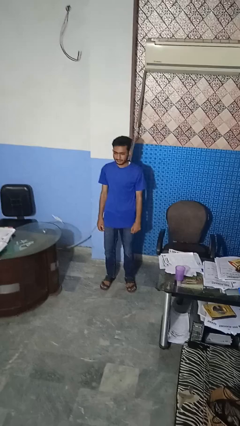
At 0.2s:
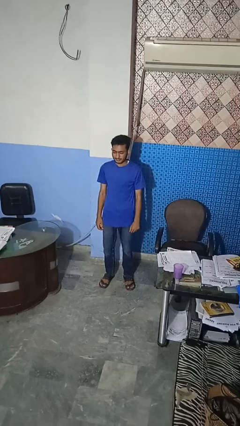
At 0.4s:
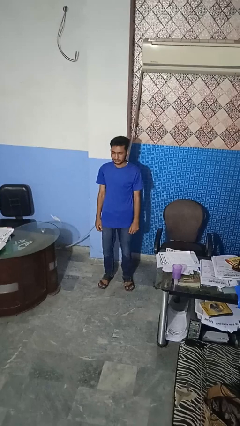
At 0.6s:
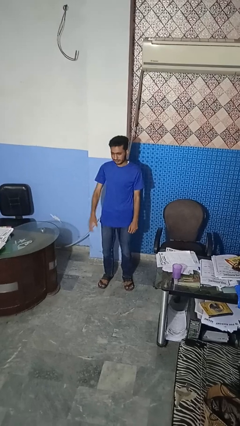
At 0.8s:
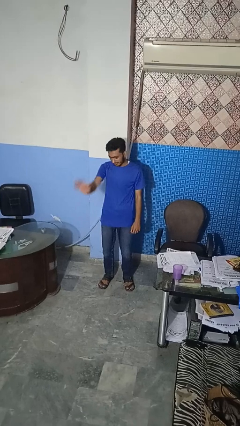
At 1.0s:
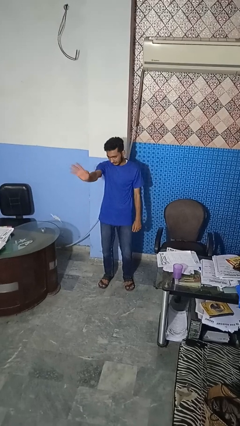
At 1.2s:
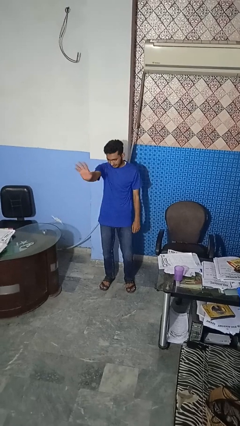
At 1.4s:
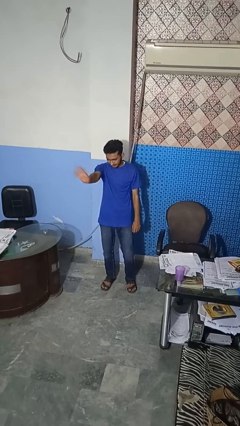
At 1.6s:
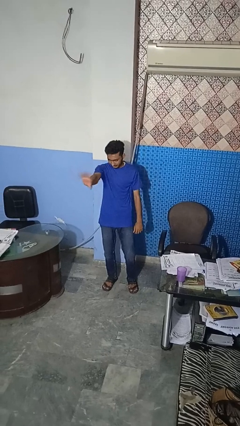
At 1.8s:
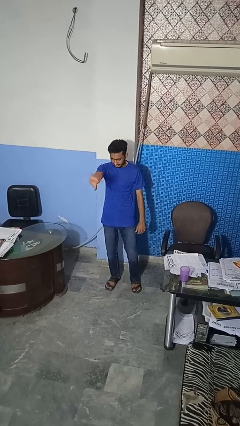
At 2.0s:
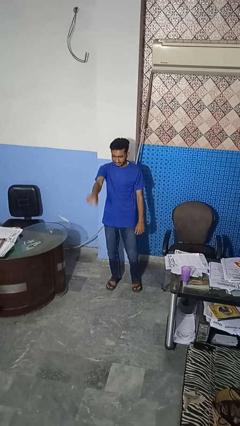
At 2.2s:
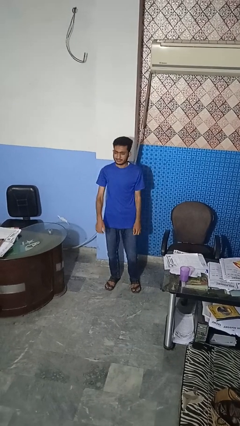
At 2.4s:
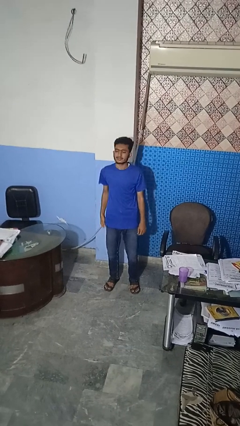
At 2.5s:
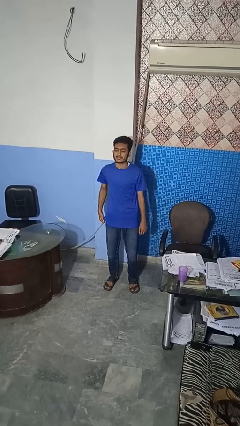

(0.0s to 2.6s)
person waves at person

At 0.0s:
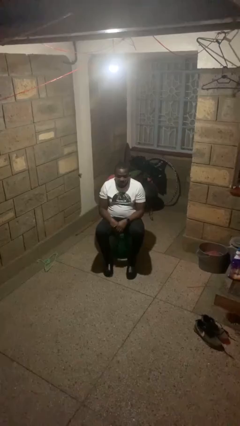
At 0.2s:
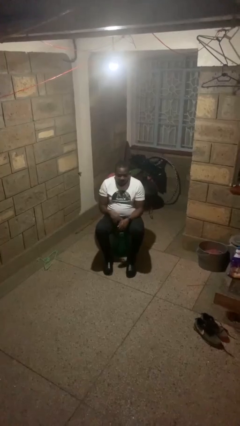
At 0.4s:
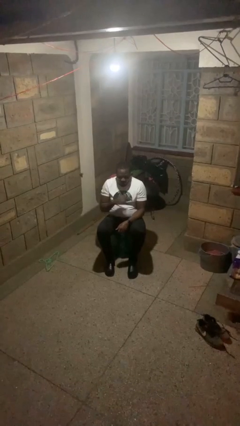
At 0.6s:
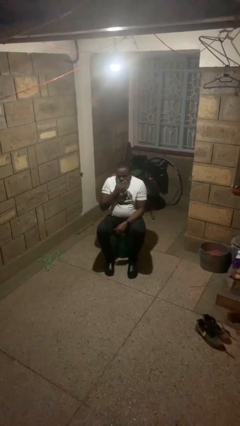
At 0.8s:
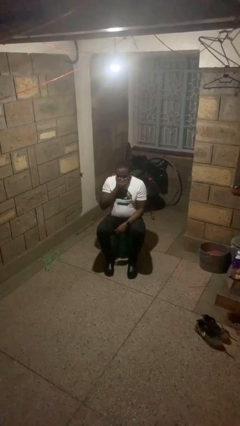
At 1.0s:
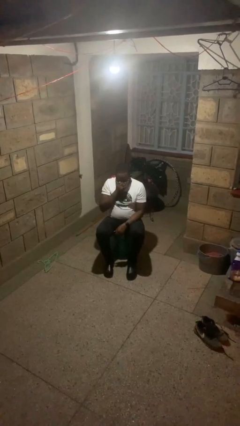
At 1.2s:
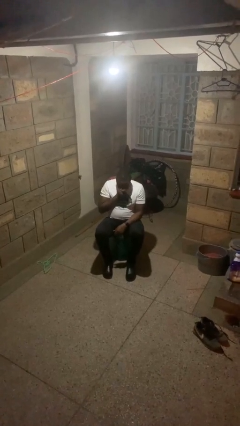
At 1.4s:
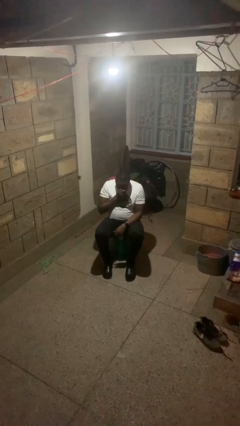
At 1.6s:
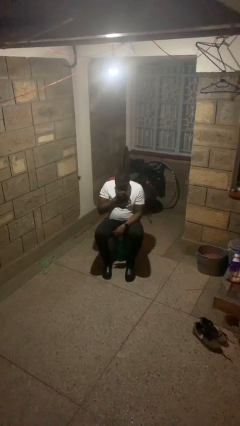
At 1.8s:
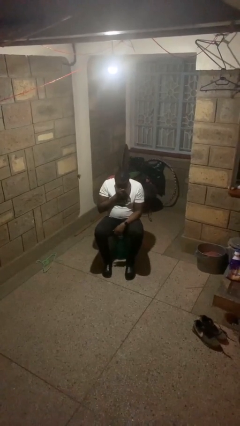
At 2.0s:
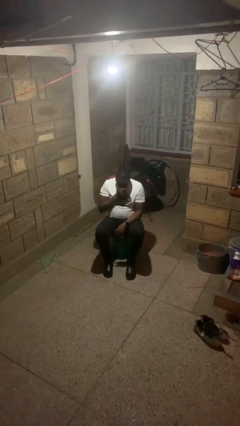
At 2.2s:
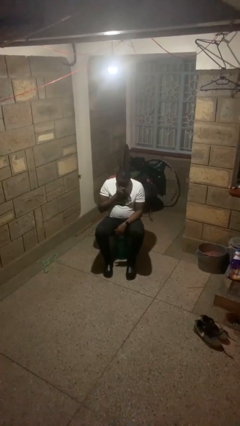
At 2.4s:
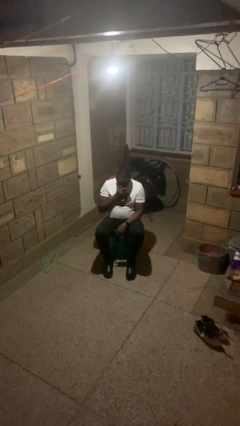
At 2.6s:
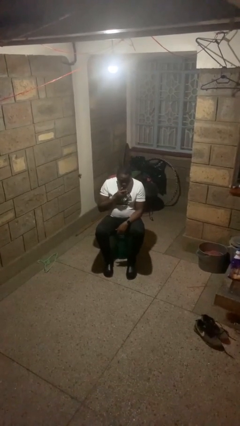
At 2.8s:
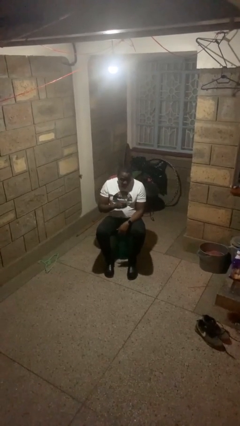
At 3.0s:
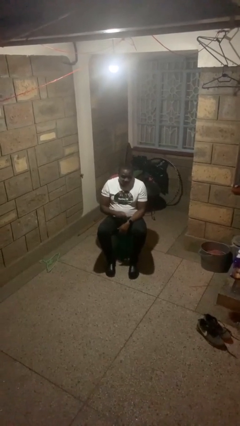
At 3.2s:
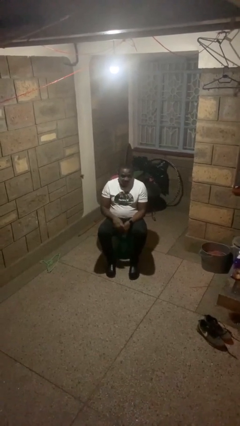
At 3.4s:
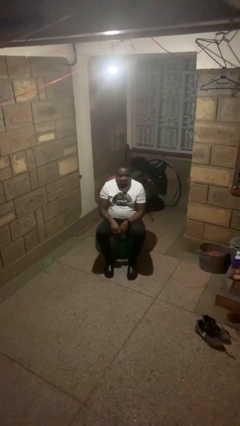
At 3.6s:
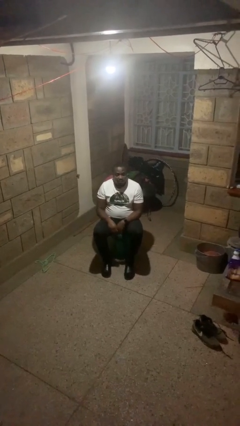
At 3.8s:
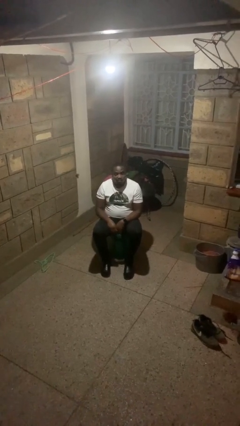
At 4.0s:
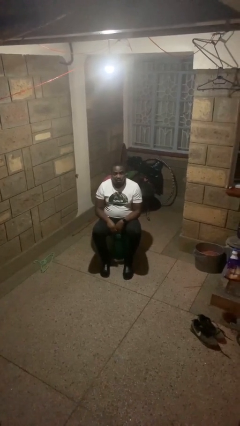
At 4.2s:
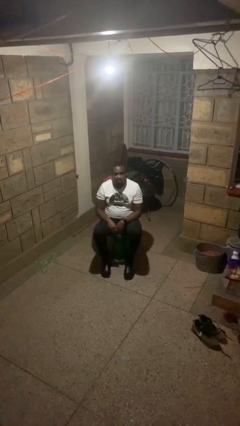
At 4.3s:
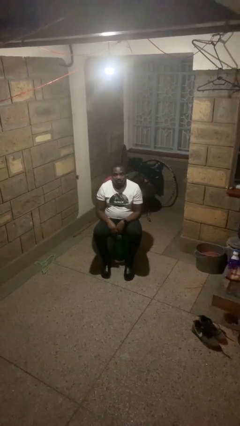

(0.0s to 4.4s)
person sneezes into hand

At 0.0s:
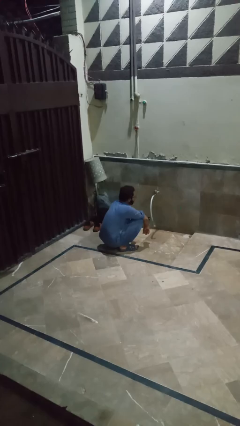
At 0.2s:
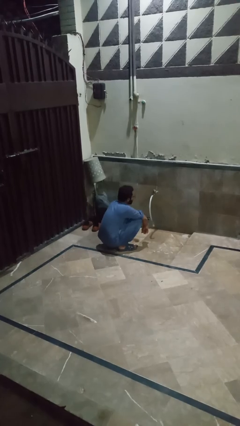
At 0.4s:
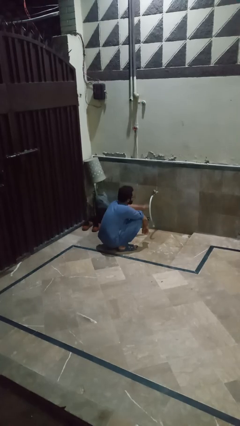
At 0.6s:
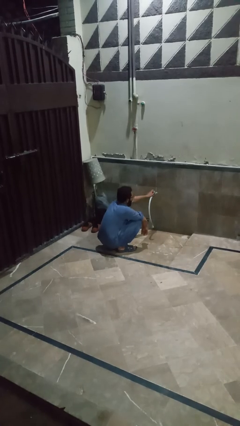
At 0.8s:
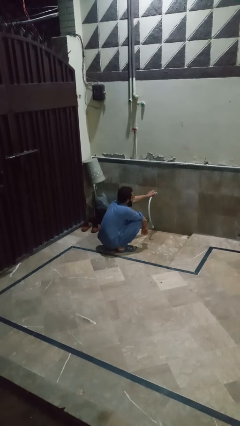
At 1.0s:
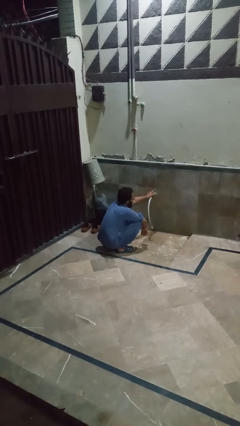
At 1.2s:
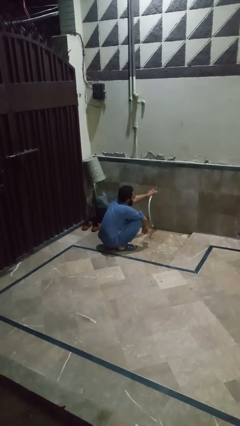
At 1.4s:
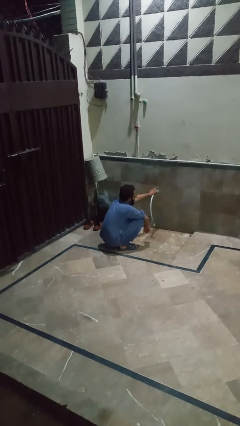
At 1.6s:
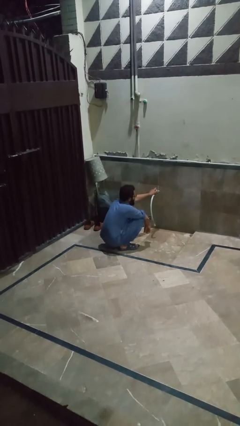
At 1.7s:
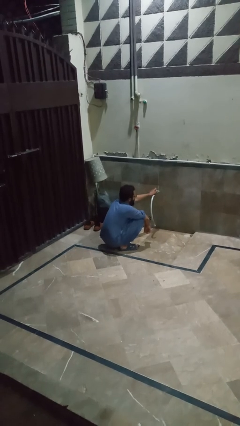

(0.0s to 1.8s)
person turns on faucet

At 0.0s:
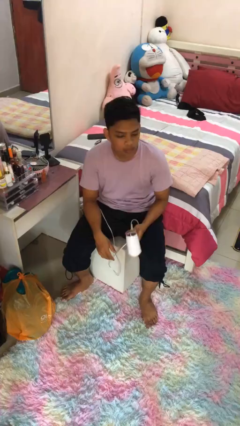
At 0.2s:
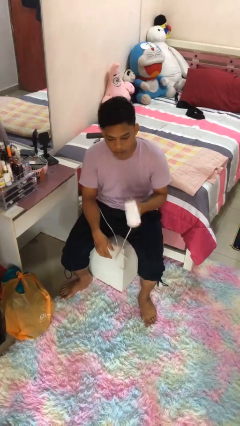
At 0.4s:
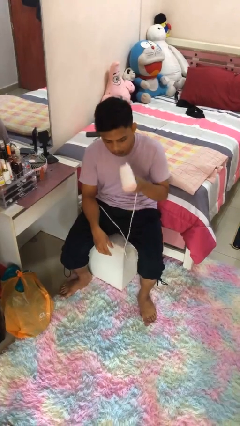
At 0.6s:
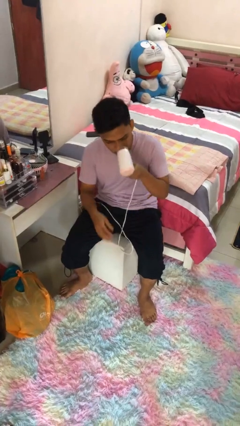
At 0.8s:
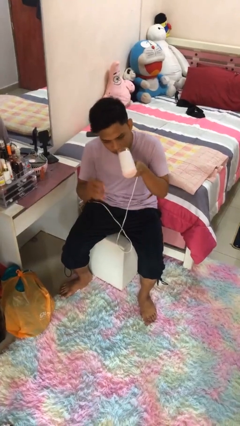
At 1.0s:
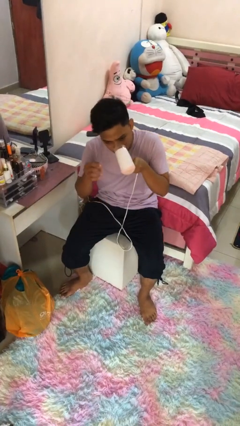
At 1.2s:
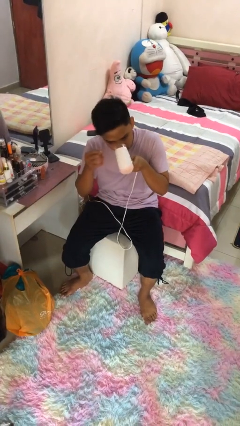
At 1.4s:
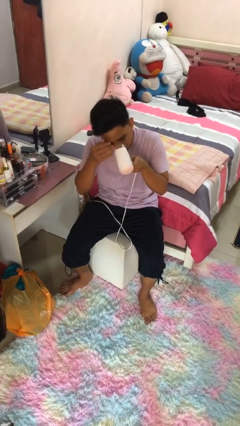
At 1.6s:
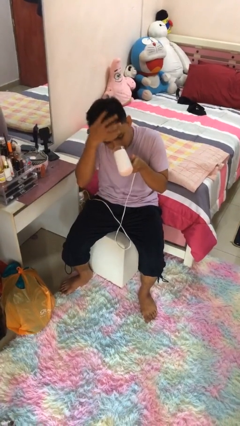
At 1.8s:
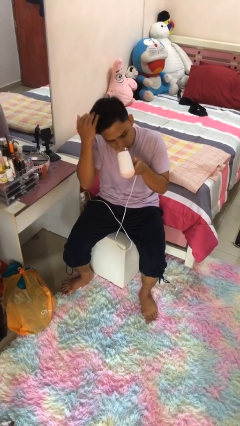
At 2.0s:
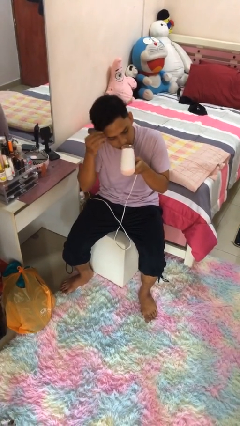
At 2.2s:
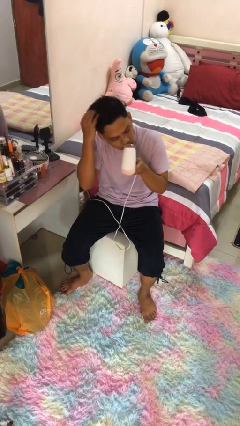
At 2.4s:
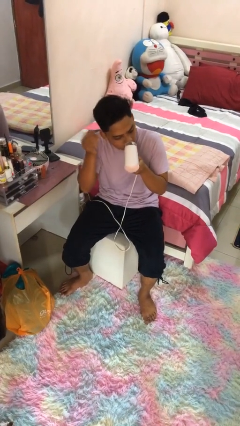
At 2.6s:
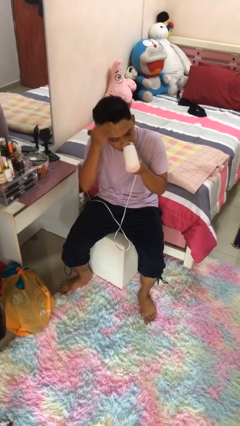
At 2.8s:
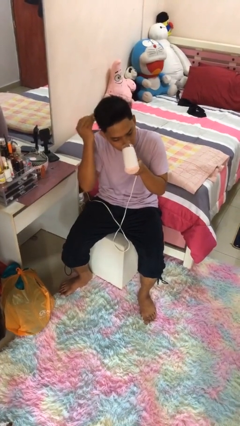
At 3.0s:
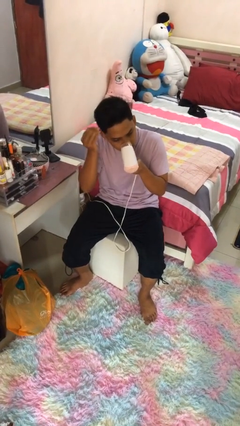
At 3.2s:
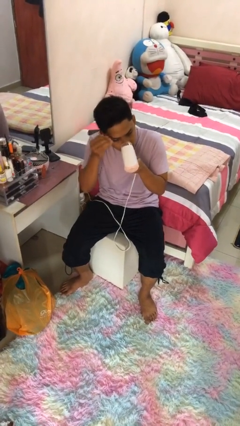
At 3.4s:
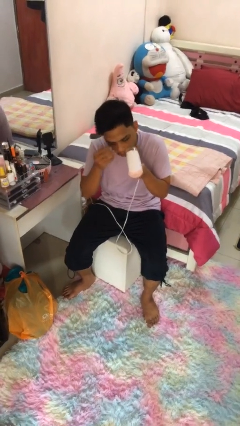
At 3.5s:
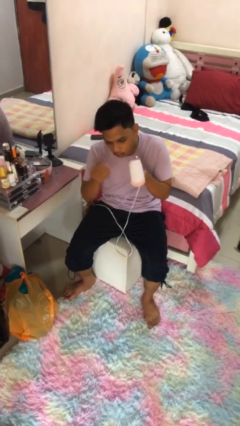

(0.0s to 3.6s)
person dries hair with hairdryer

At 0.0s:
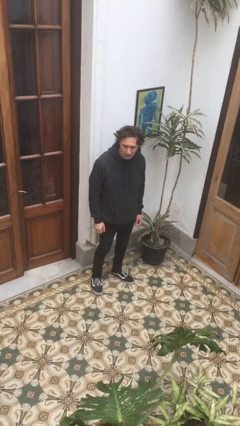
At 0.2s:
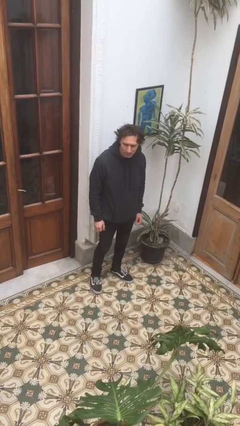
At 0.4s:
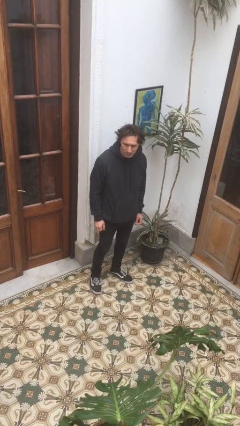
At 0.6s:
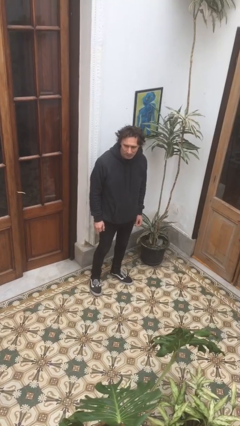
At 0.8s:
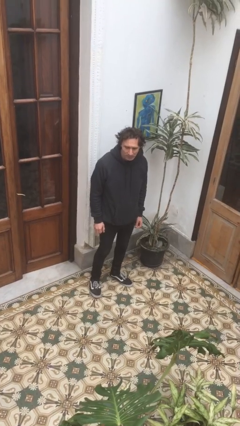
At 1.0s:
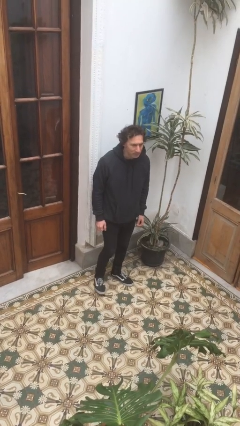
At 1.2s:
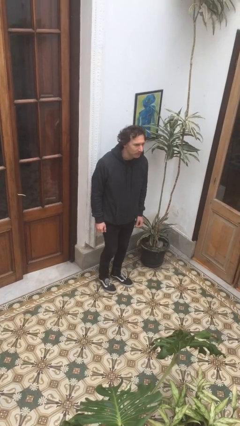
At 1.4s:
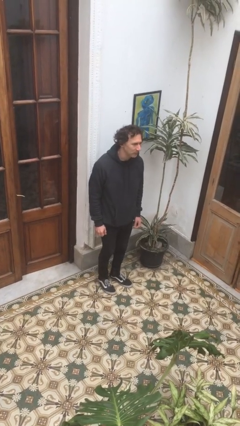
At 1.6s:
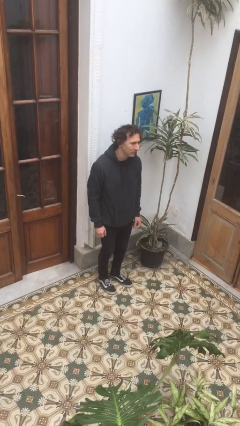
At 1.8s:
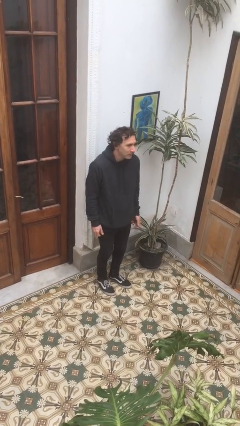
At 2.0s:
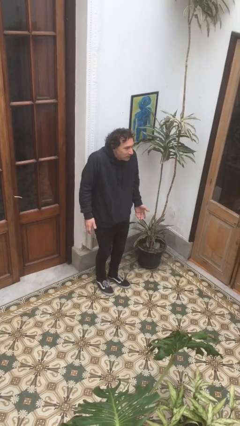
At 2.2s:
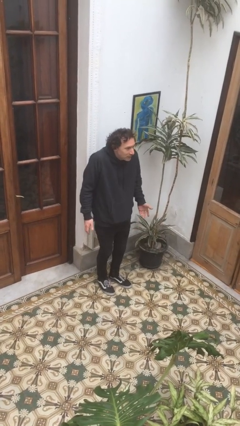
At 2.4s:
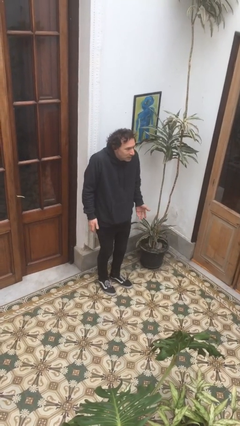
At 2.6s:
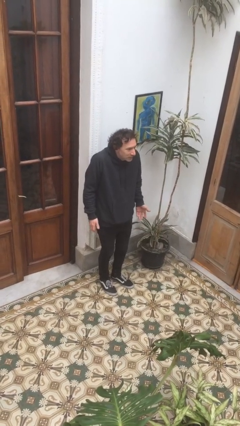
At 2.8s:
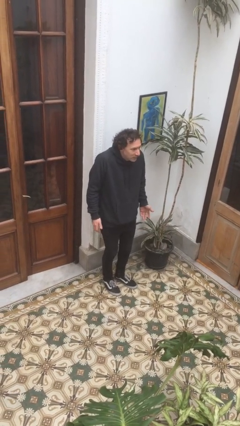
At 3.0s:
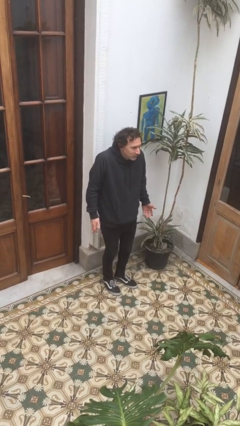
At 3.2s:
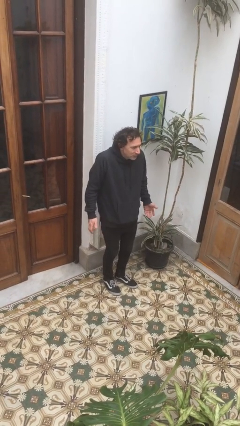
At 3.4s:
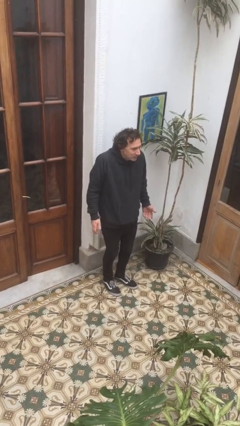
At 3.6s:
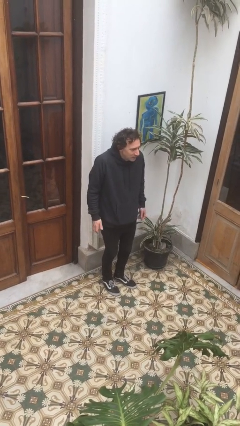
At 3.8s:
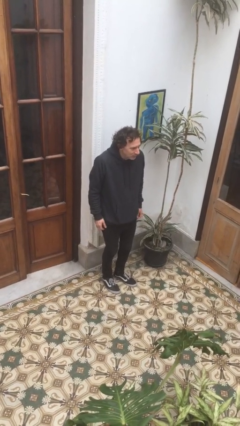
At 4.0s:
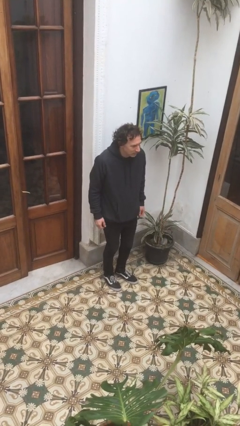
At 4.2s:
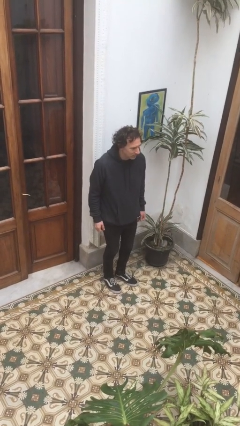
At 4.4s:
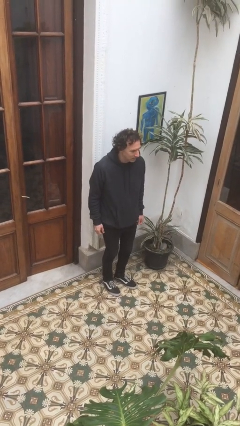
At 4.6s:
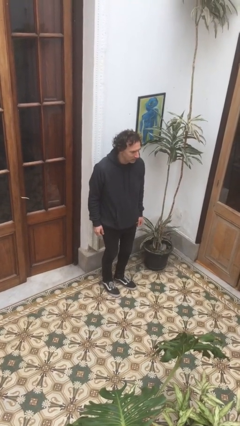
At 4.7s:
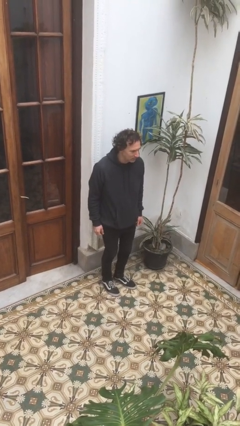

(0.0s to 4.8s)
person shrugs
